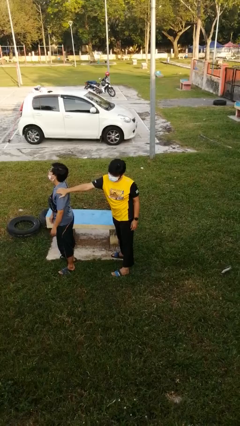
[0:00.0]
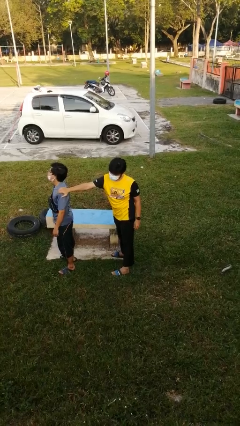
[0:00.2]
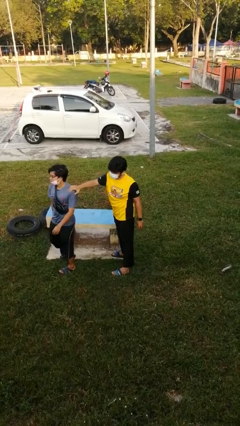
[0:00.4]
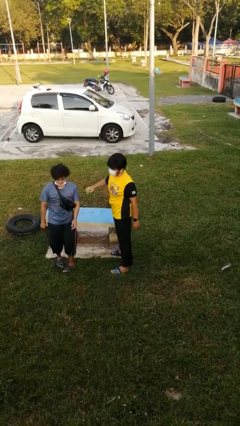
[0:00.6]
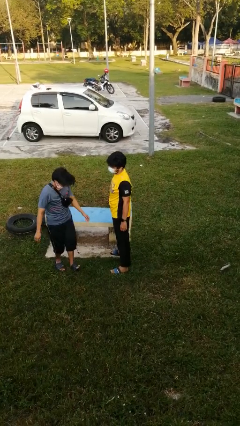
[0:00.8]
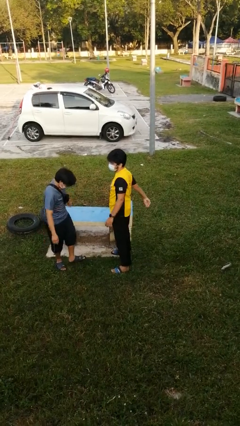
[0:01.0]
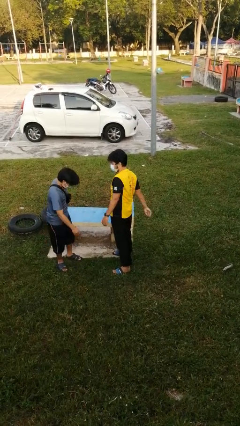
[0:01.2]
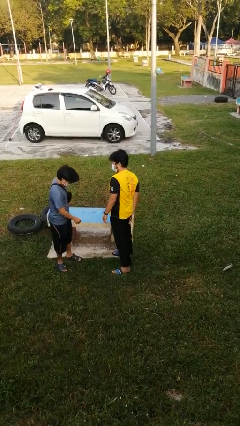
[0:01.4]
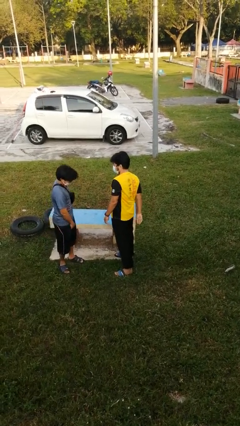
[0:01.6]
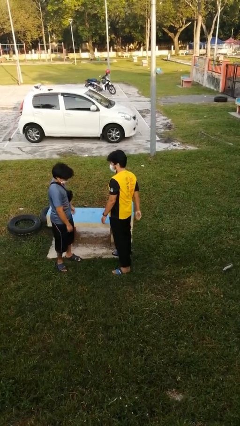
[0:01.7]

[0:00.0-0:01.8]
person spins person around

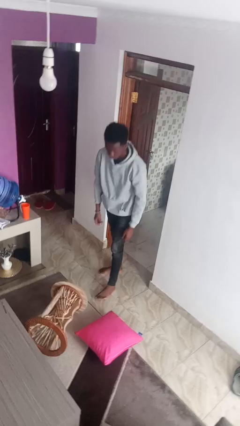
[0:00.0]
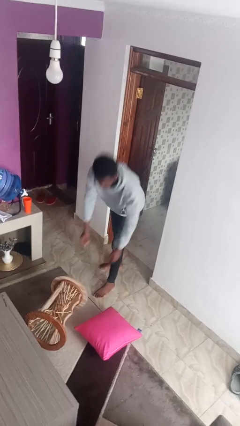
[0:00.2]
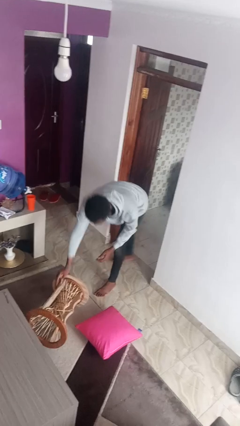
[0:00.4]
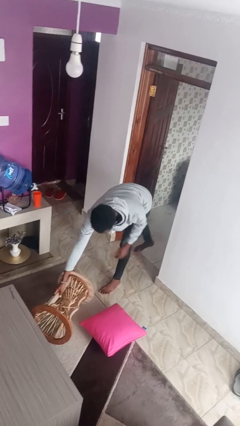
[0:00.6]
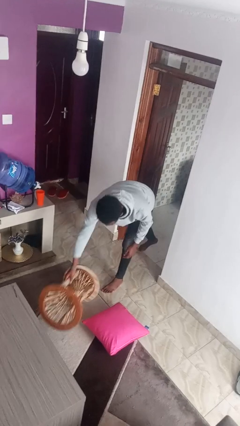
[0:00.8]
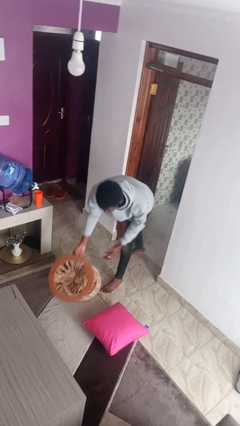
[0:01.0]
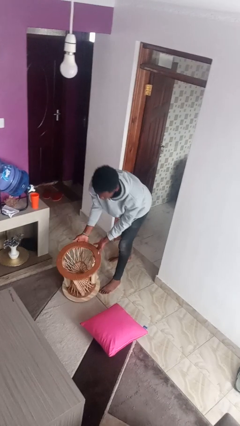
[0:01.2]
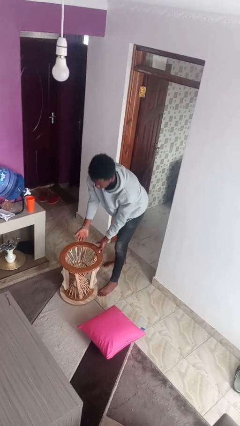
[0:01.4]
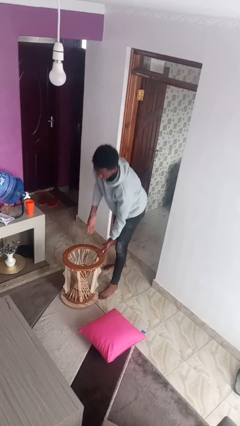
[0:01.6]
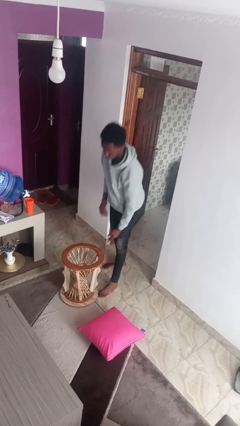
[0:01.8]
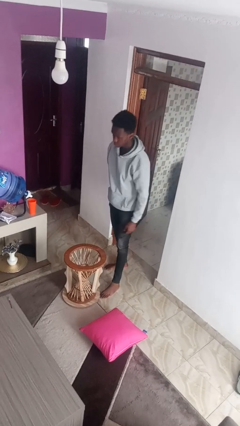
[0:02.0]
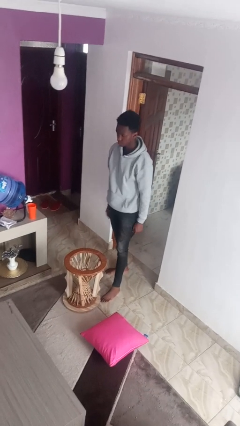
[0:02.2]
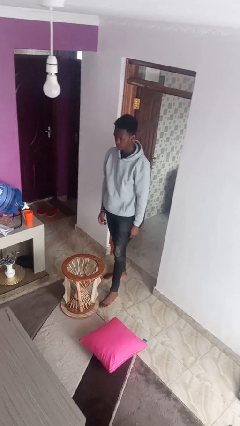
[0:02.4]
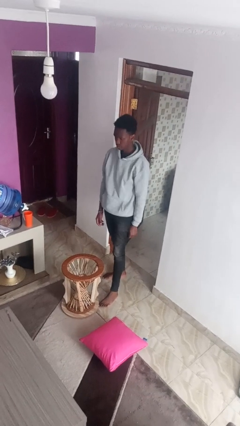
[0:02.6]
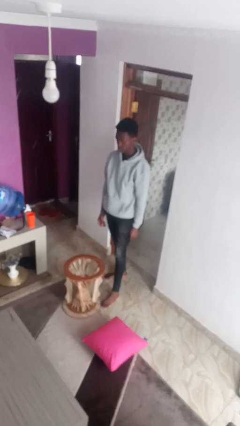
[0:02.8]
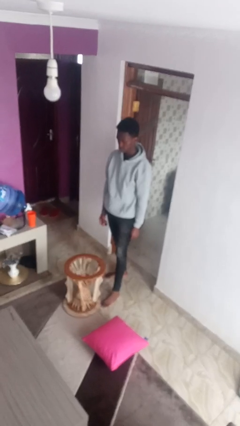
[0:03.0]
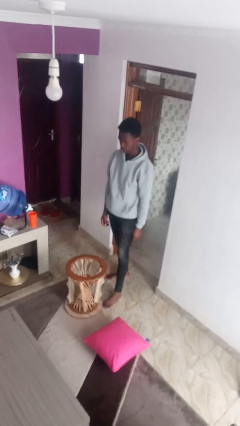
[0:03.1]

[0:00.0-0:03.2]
person sets upright furniture

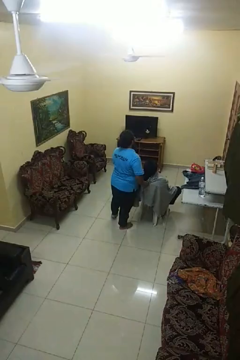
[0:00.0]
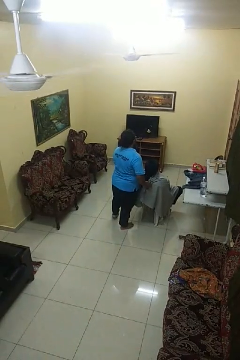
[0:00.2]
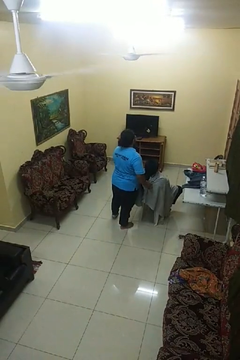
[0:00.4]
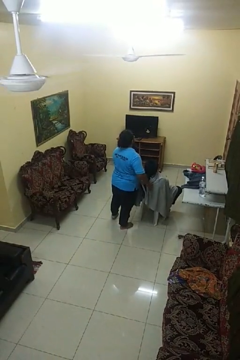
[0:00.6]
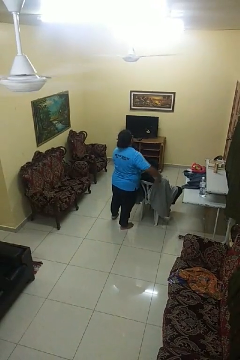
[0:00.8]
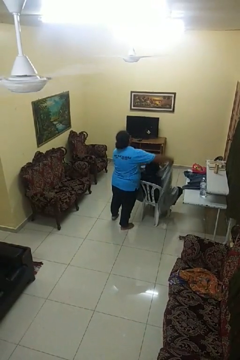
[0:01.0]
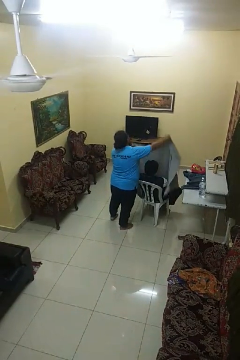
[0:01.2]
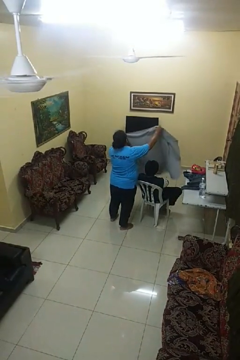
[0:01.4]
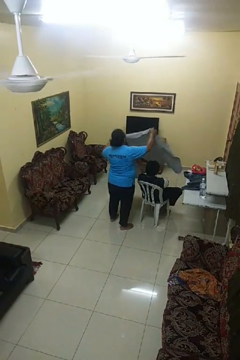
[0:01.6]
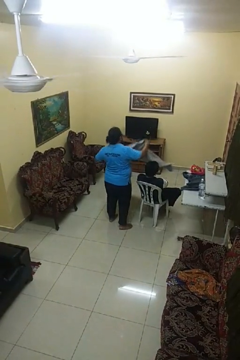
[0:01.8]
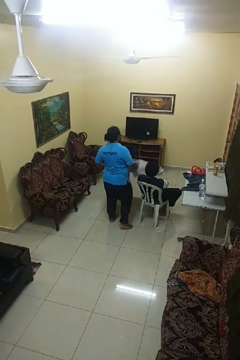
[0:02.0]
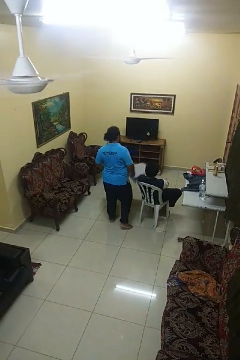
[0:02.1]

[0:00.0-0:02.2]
person uncovers friend with blanket

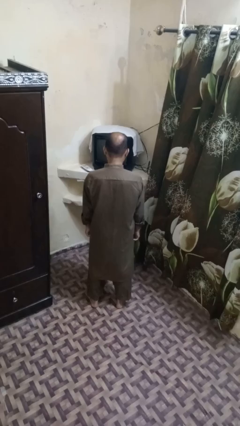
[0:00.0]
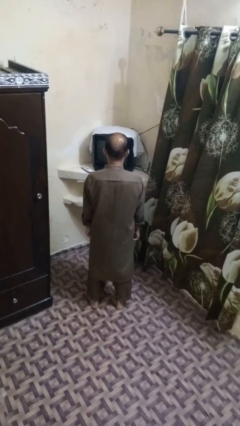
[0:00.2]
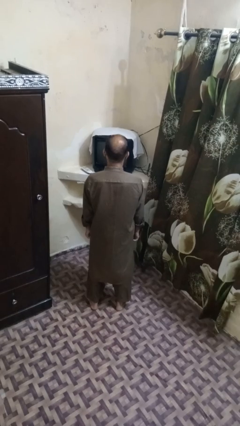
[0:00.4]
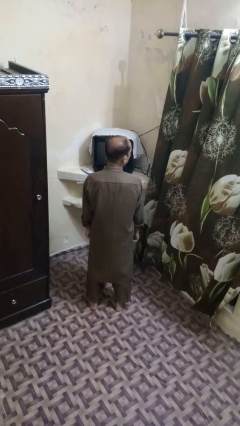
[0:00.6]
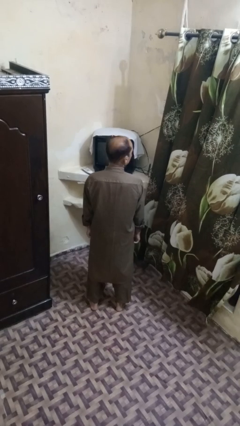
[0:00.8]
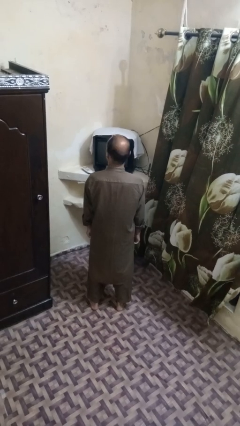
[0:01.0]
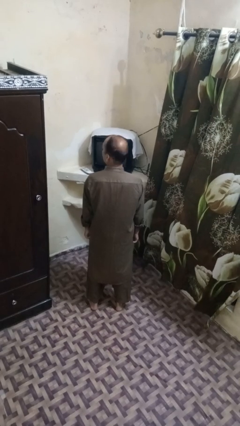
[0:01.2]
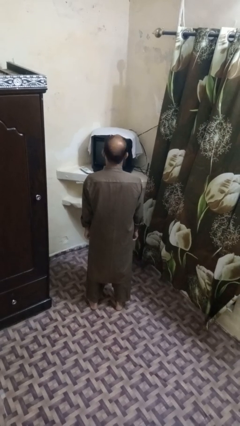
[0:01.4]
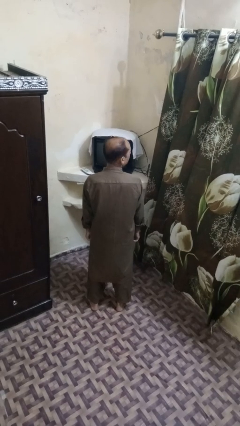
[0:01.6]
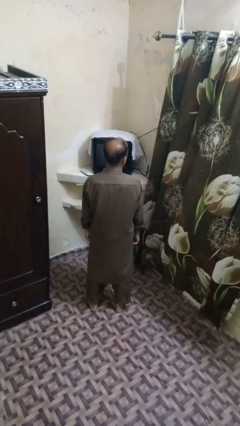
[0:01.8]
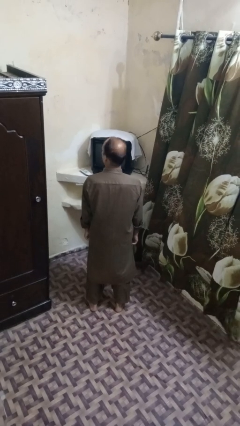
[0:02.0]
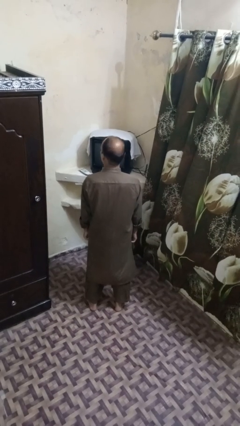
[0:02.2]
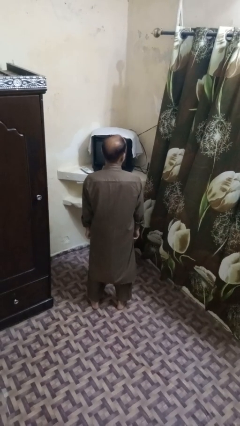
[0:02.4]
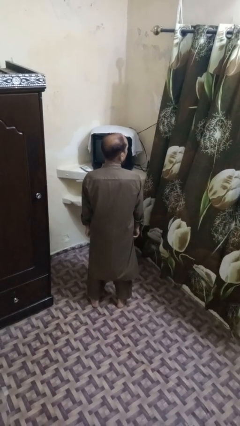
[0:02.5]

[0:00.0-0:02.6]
person shakes head

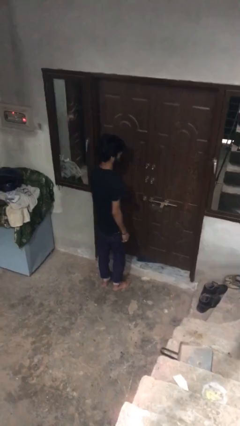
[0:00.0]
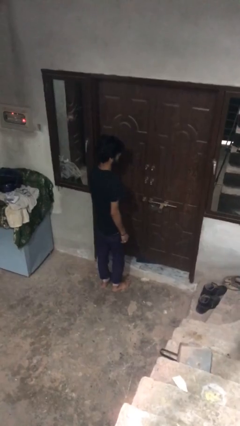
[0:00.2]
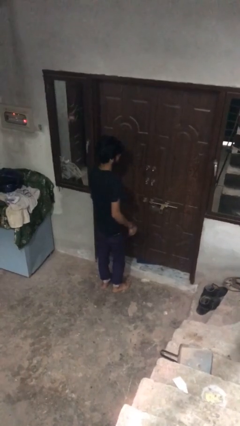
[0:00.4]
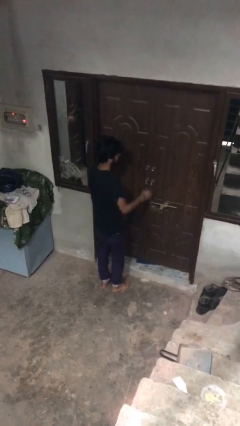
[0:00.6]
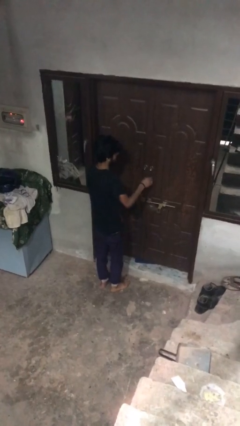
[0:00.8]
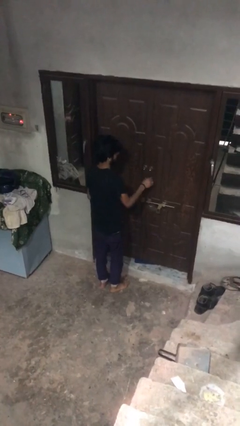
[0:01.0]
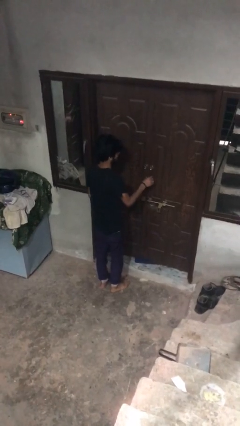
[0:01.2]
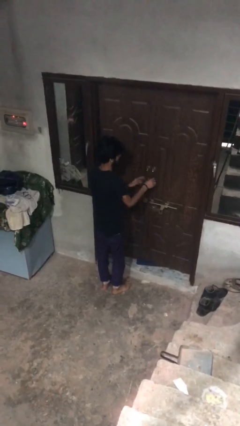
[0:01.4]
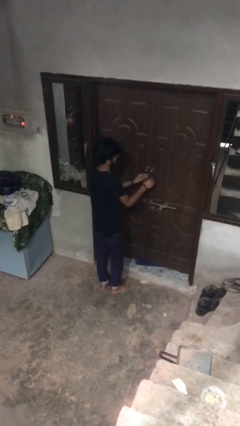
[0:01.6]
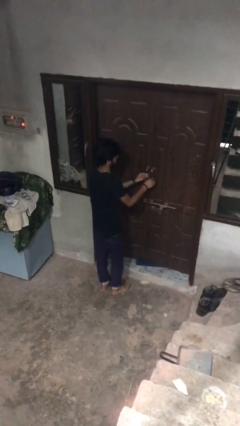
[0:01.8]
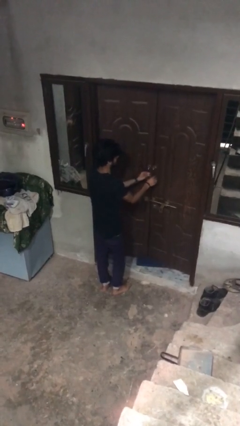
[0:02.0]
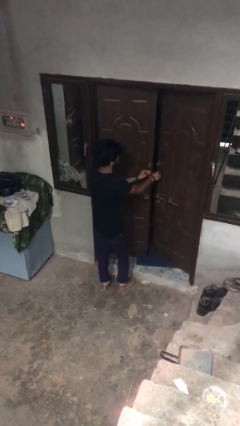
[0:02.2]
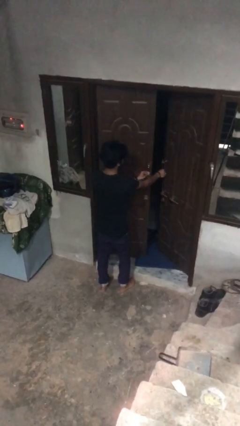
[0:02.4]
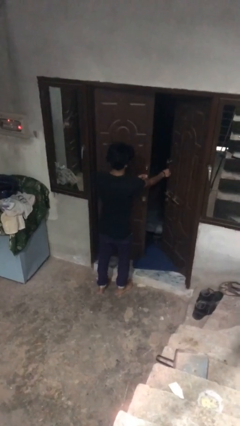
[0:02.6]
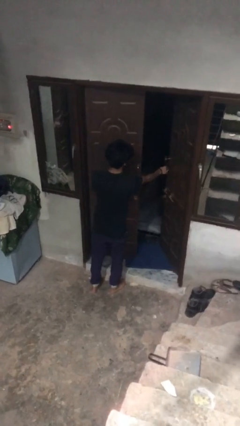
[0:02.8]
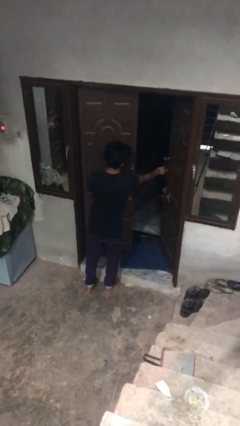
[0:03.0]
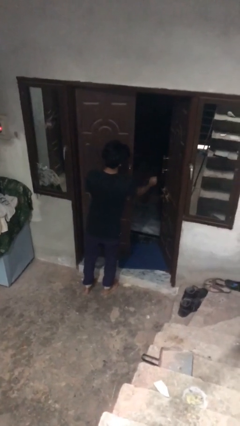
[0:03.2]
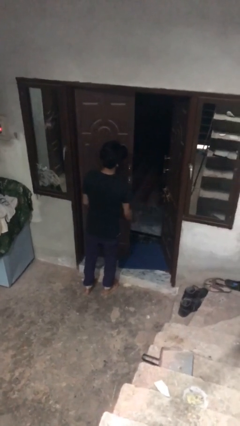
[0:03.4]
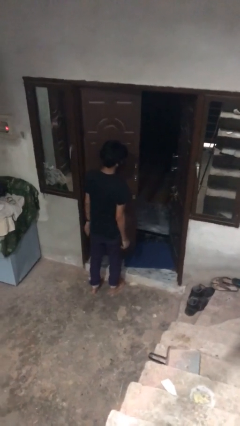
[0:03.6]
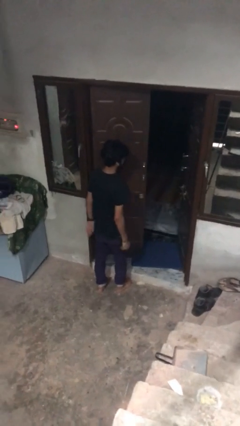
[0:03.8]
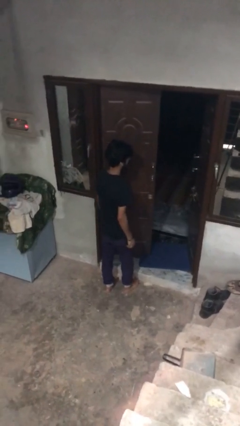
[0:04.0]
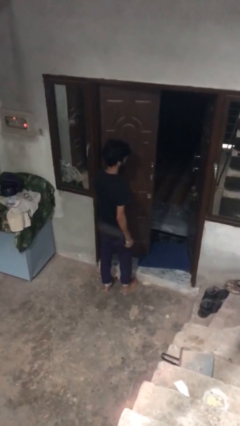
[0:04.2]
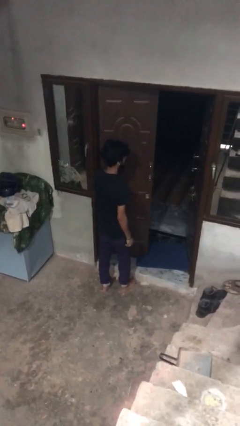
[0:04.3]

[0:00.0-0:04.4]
person opens facility door

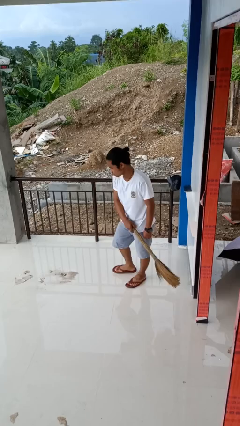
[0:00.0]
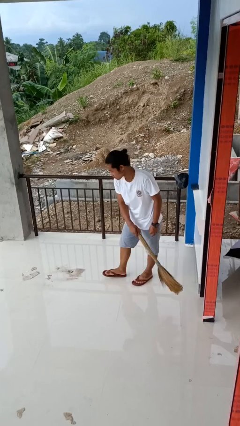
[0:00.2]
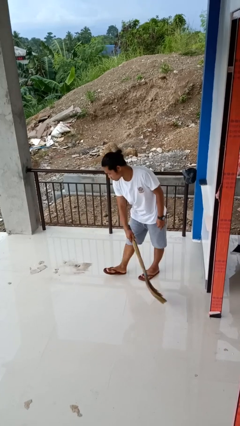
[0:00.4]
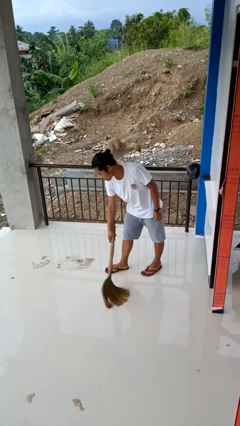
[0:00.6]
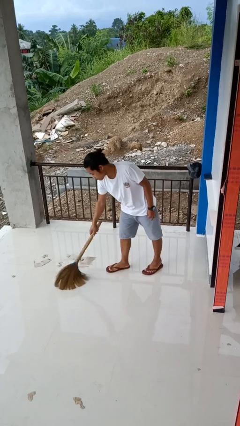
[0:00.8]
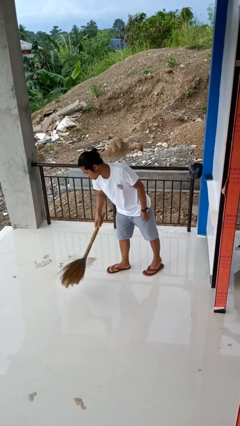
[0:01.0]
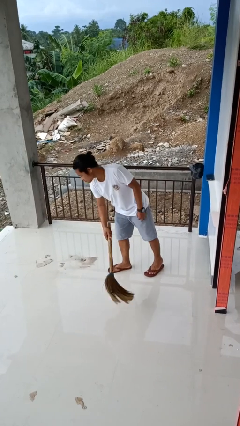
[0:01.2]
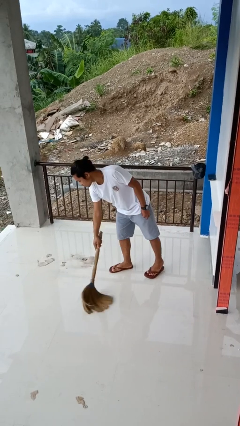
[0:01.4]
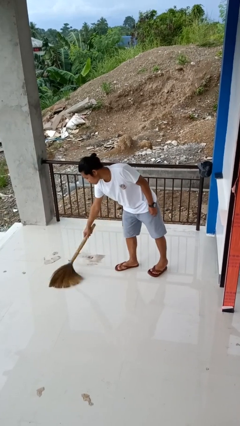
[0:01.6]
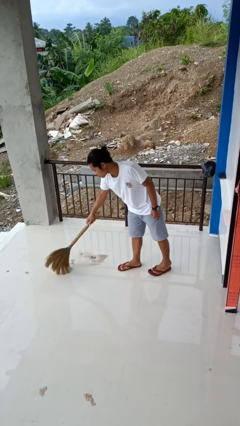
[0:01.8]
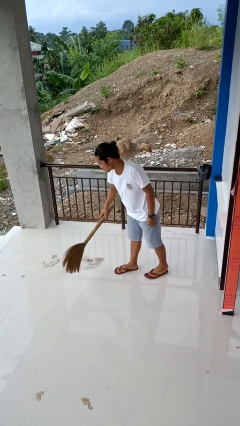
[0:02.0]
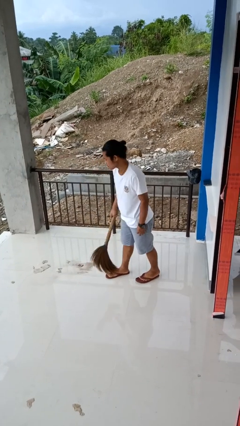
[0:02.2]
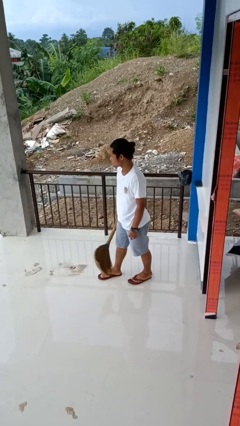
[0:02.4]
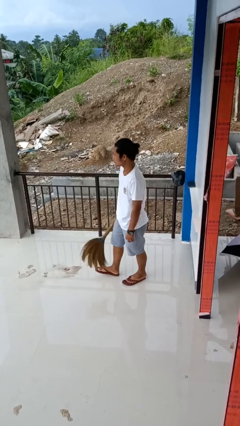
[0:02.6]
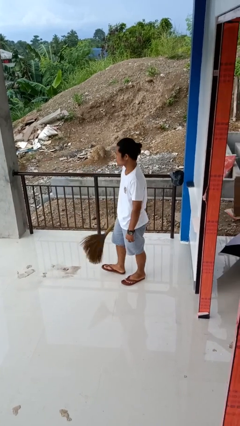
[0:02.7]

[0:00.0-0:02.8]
person sweeps floor

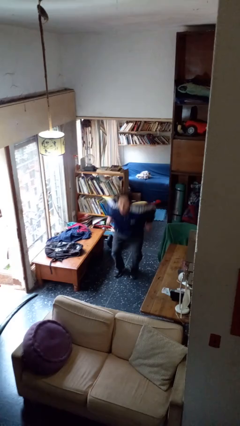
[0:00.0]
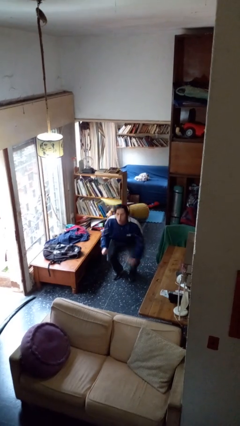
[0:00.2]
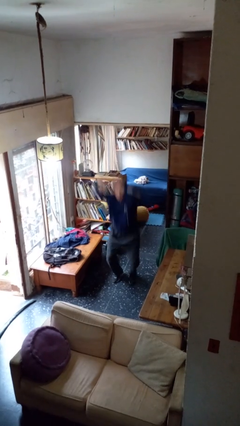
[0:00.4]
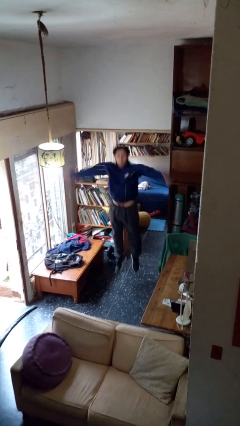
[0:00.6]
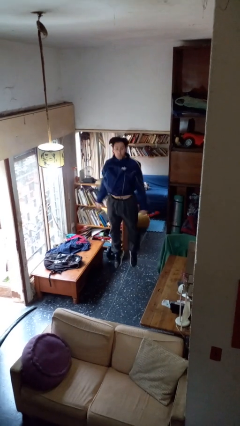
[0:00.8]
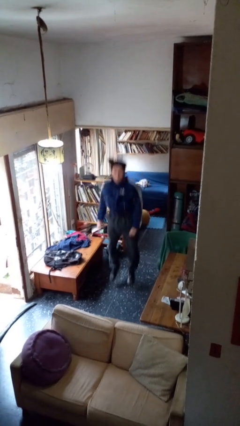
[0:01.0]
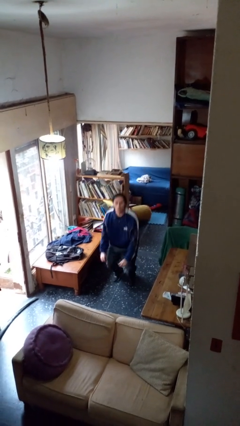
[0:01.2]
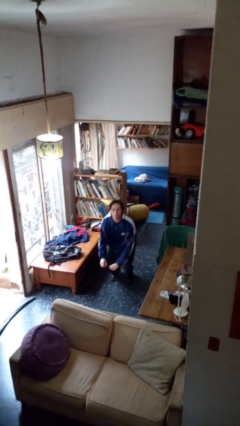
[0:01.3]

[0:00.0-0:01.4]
person jumps
